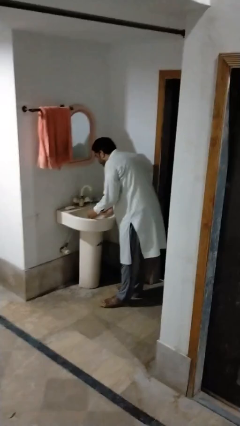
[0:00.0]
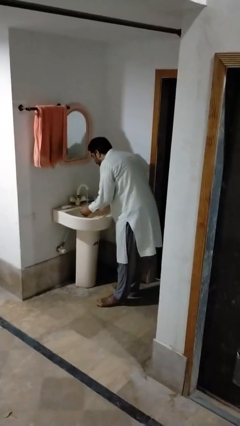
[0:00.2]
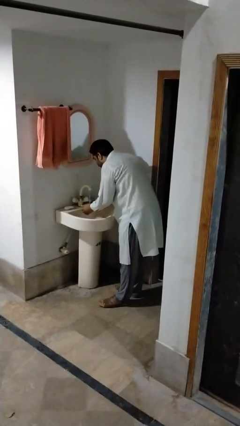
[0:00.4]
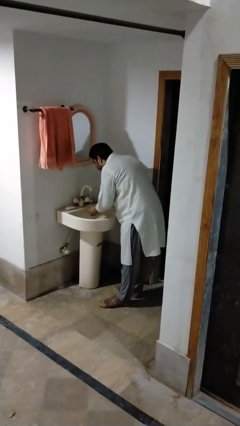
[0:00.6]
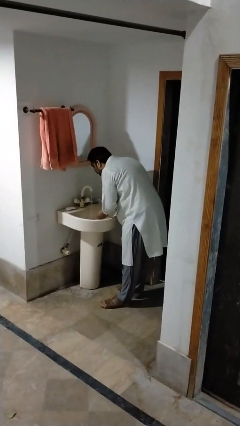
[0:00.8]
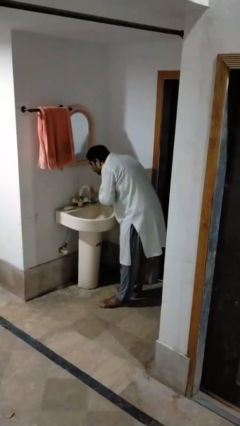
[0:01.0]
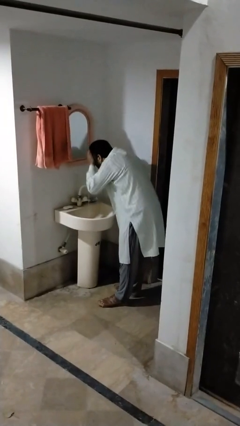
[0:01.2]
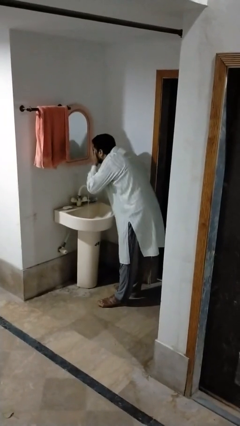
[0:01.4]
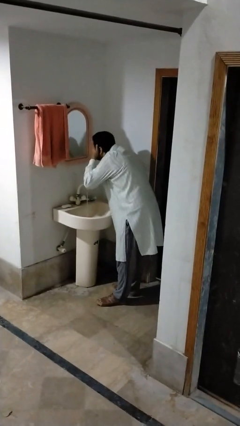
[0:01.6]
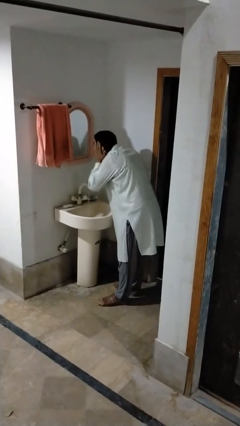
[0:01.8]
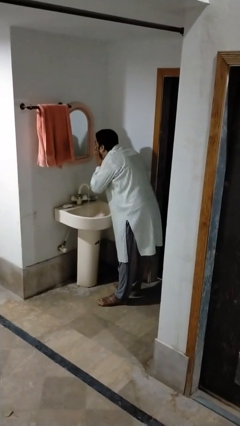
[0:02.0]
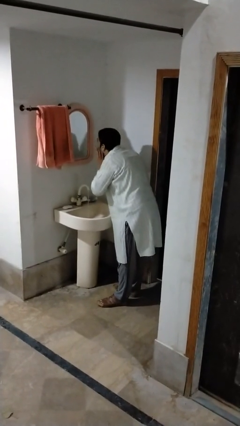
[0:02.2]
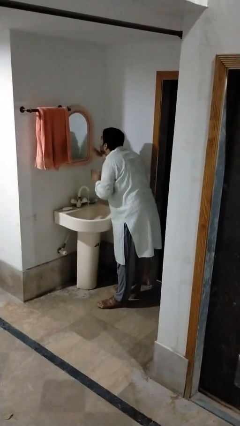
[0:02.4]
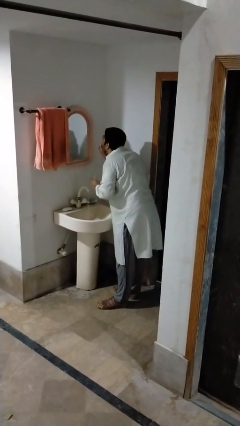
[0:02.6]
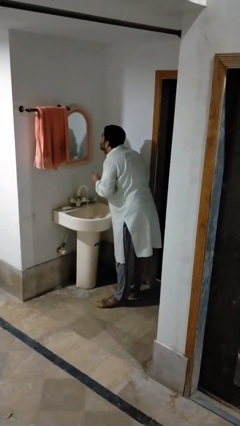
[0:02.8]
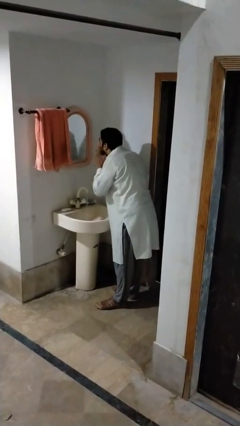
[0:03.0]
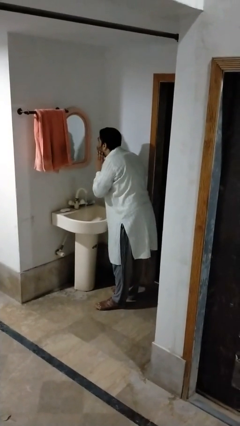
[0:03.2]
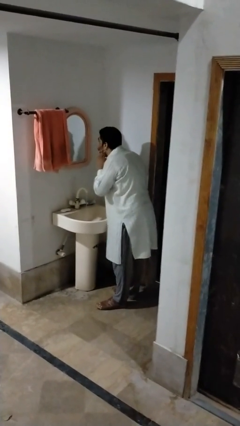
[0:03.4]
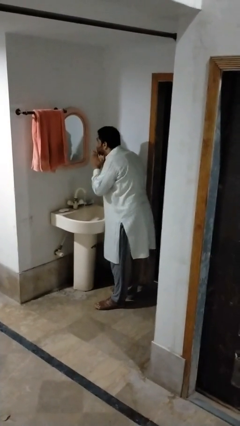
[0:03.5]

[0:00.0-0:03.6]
person washes face

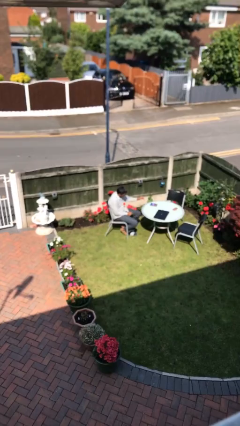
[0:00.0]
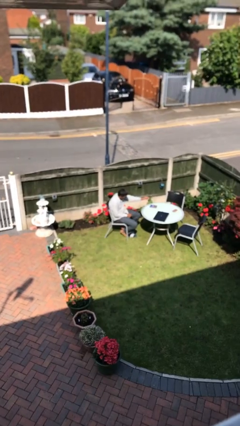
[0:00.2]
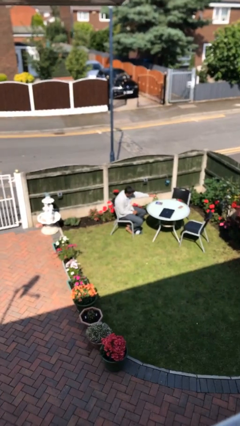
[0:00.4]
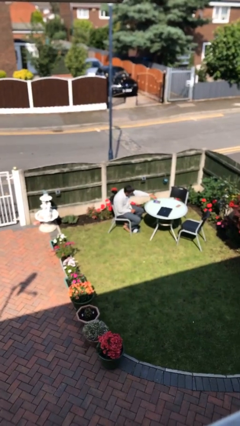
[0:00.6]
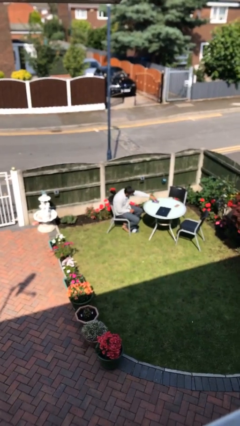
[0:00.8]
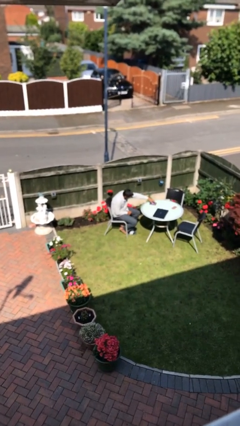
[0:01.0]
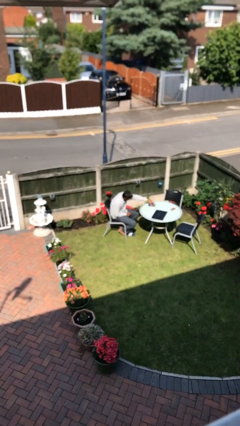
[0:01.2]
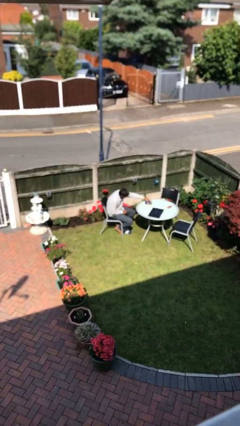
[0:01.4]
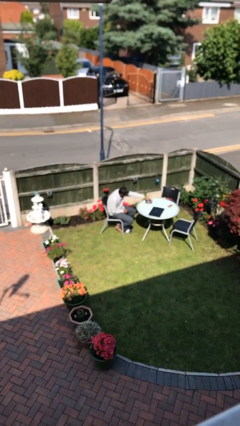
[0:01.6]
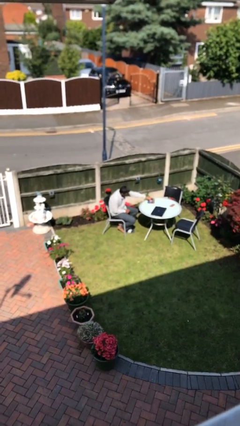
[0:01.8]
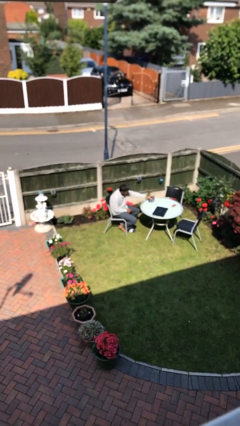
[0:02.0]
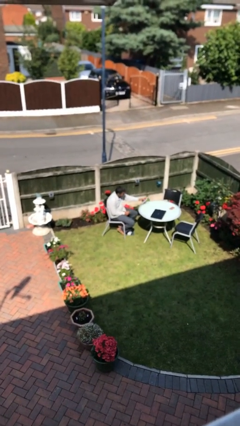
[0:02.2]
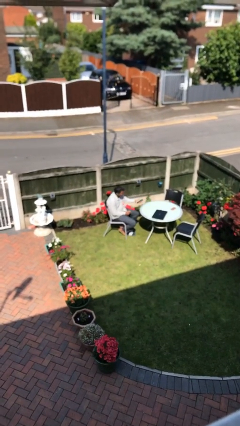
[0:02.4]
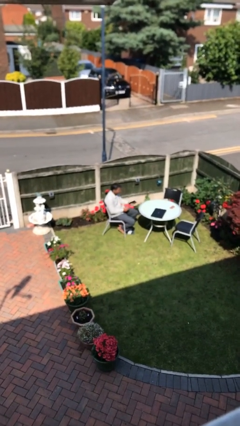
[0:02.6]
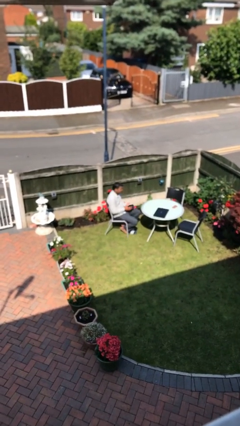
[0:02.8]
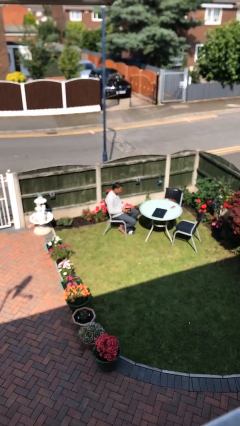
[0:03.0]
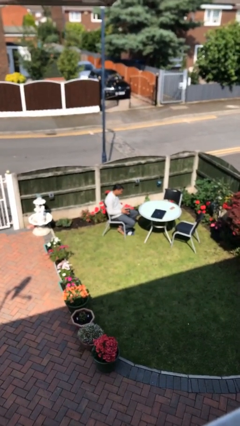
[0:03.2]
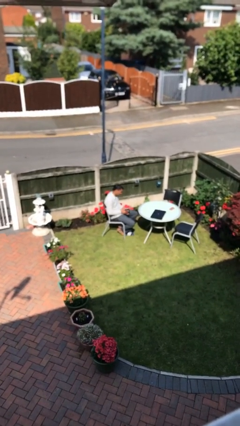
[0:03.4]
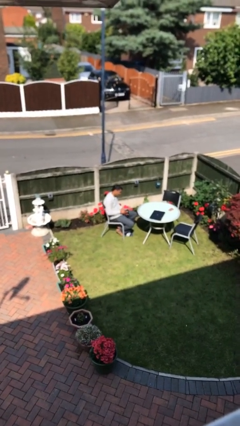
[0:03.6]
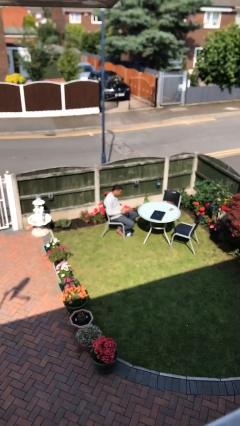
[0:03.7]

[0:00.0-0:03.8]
person picks up object from table

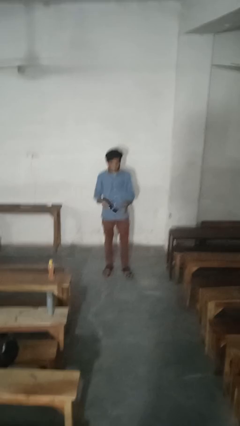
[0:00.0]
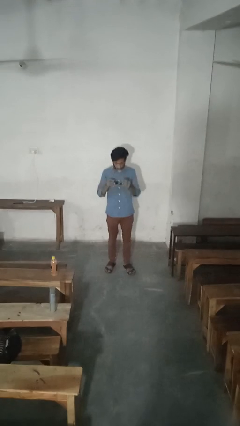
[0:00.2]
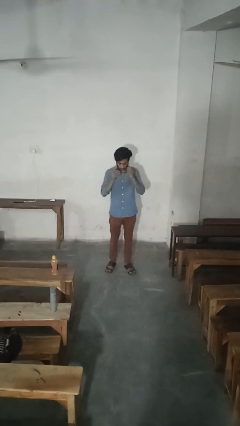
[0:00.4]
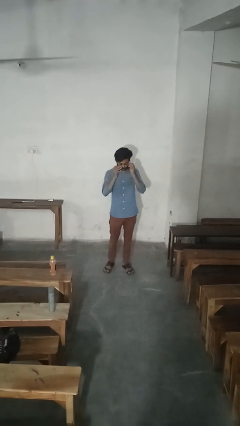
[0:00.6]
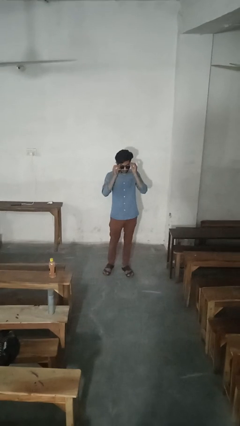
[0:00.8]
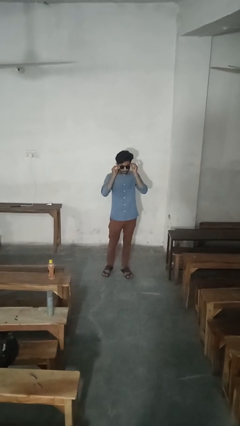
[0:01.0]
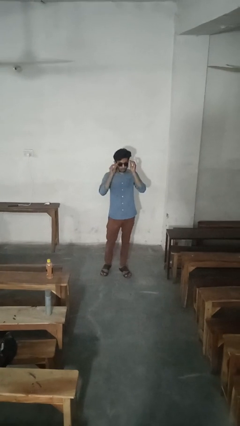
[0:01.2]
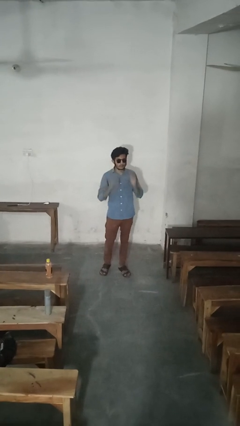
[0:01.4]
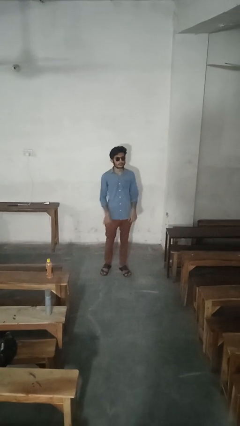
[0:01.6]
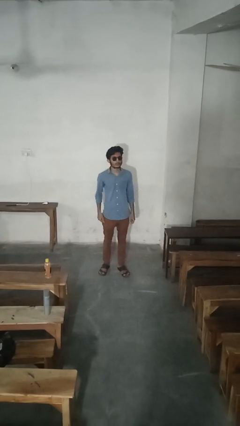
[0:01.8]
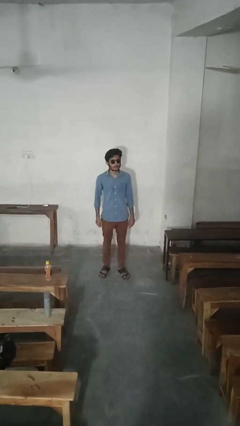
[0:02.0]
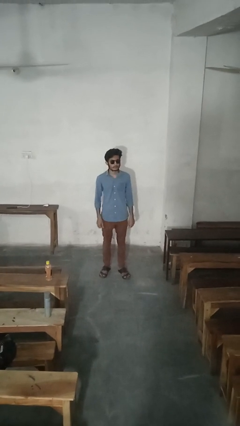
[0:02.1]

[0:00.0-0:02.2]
person puts on sunglasses

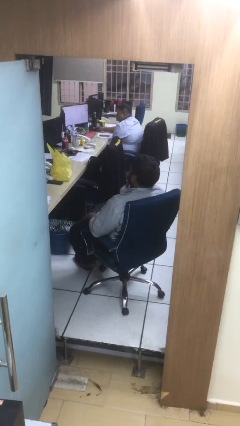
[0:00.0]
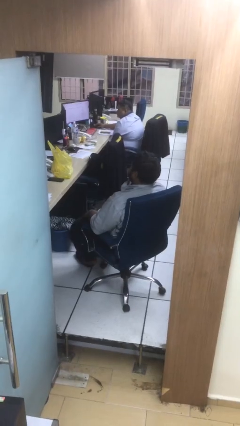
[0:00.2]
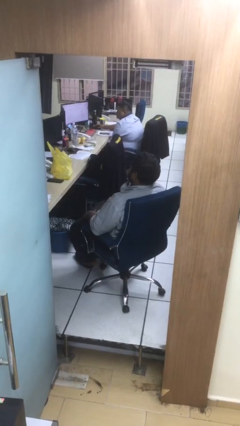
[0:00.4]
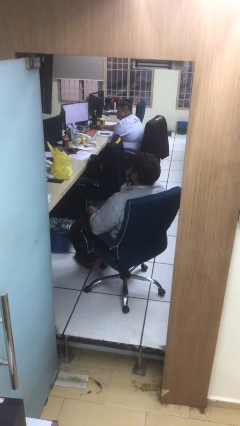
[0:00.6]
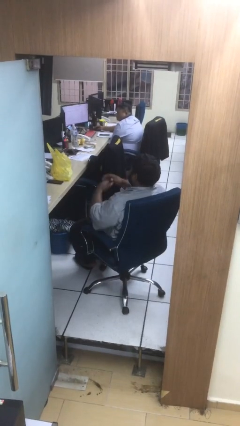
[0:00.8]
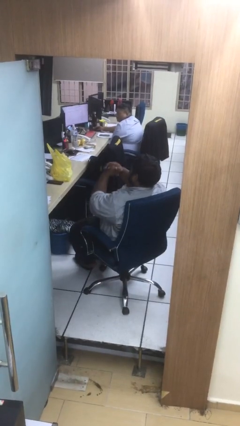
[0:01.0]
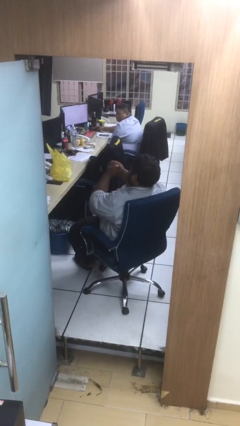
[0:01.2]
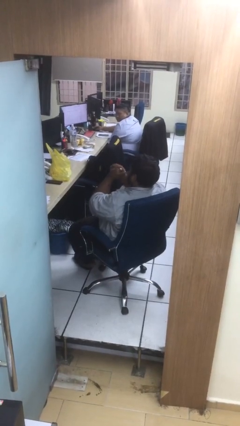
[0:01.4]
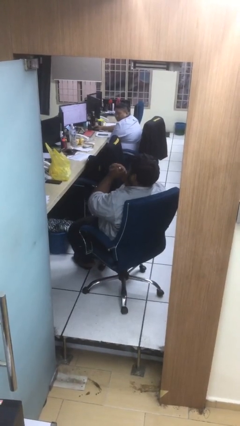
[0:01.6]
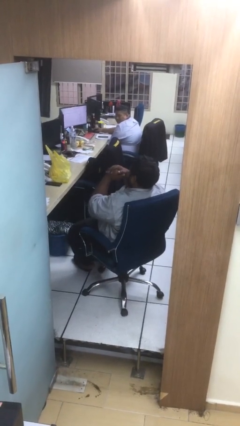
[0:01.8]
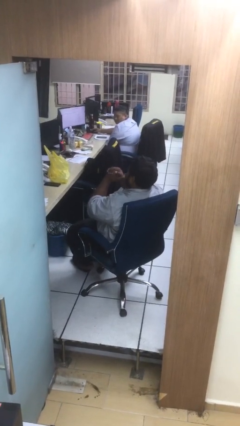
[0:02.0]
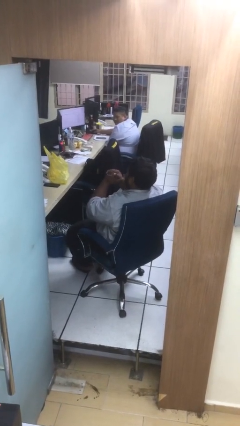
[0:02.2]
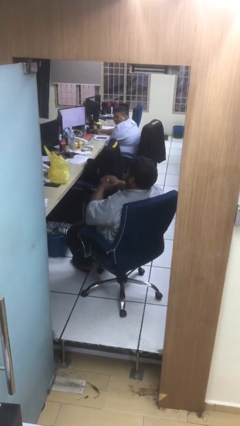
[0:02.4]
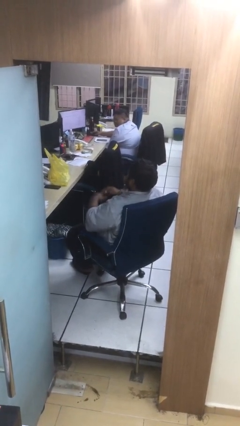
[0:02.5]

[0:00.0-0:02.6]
person cracks knuckles

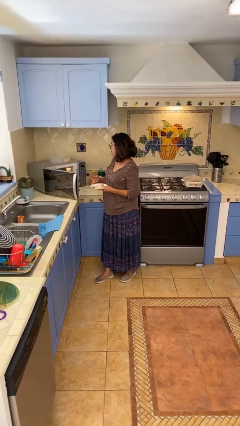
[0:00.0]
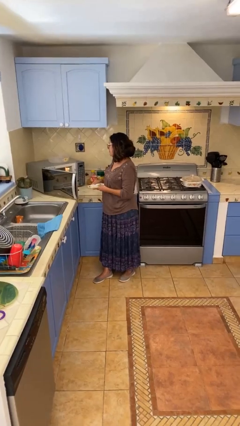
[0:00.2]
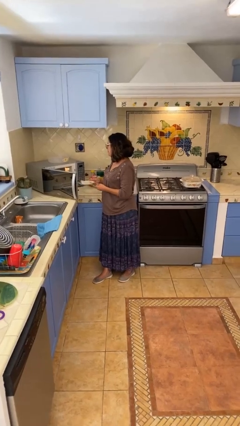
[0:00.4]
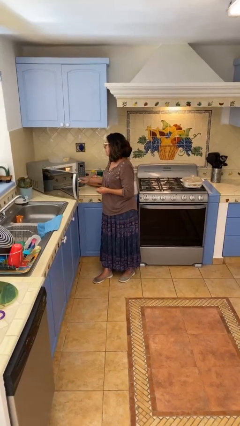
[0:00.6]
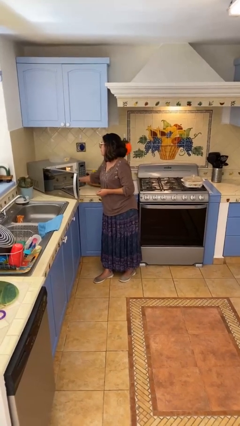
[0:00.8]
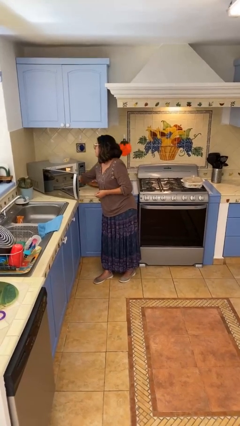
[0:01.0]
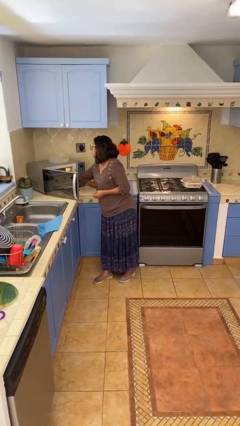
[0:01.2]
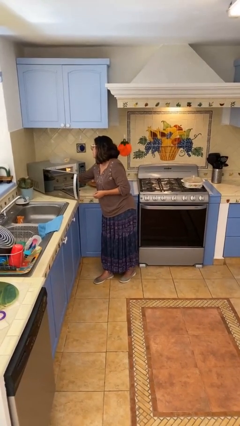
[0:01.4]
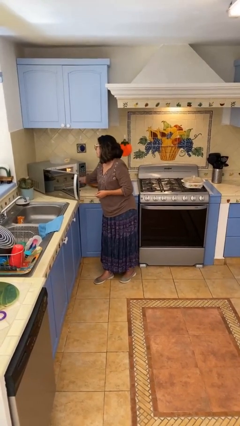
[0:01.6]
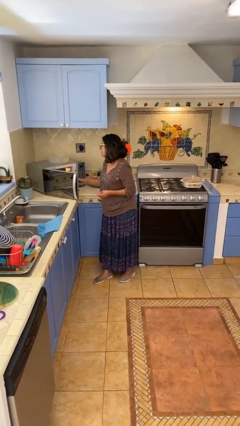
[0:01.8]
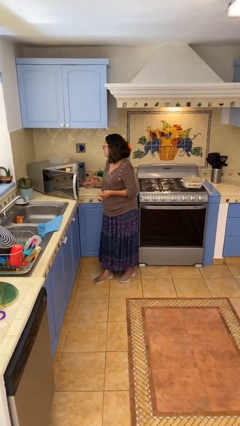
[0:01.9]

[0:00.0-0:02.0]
person puts object into microwave

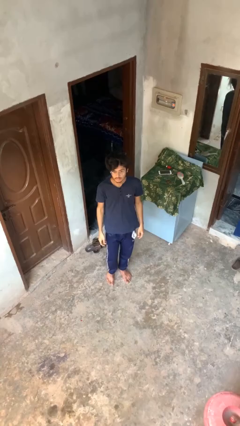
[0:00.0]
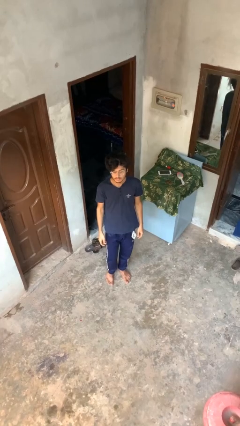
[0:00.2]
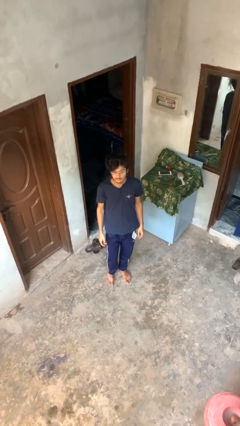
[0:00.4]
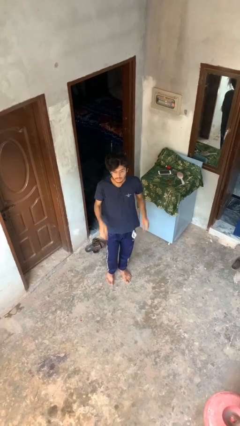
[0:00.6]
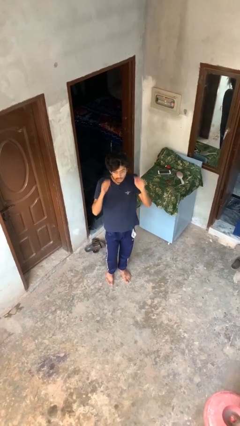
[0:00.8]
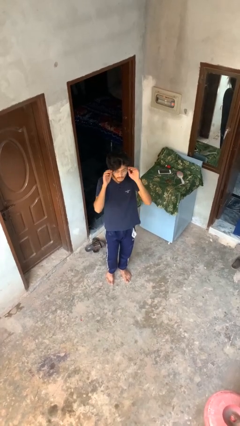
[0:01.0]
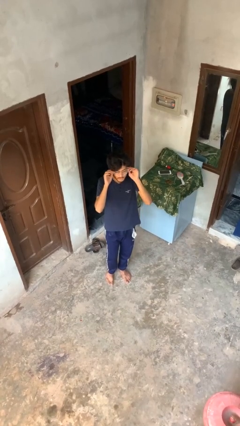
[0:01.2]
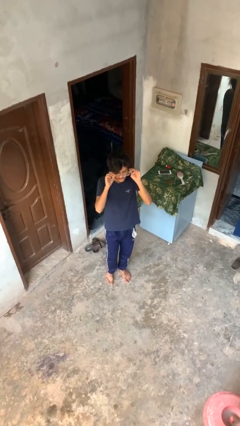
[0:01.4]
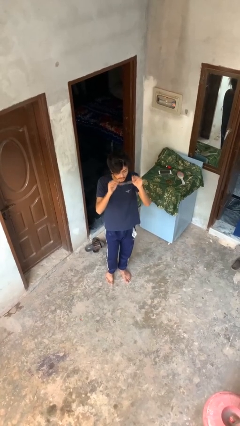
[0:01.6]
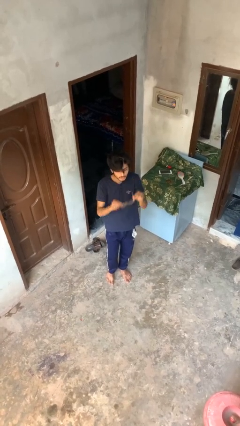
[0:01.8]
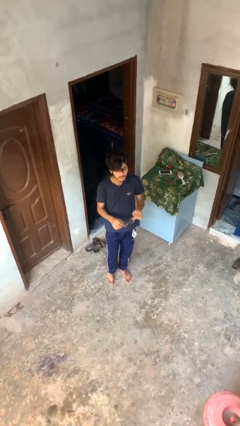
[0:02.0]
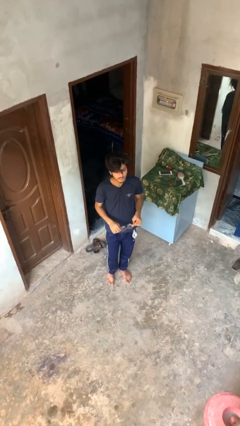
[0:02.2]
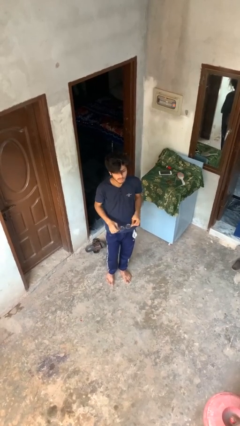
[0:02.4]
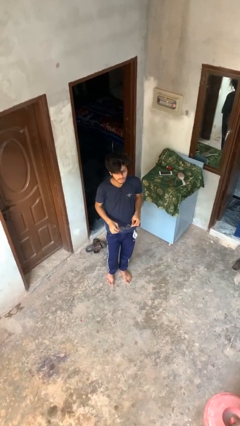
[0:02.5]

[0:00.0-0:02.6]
person takes off glasses

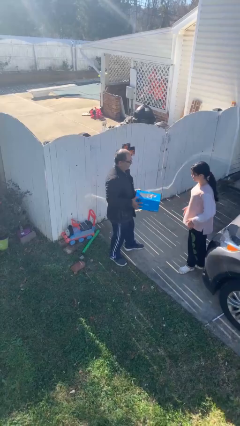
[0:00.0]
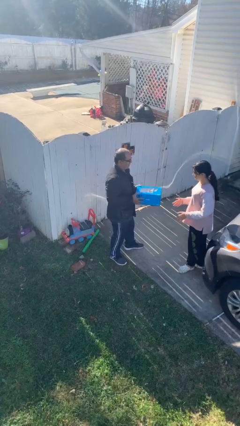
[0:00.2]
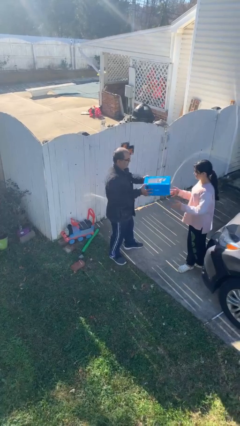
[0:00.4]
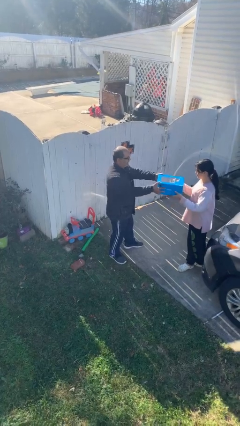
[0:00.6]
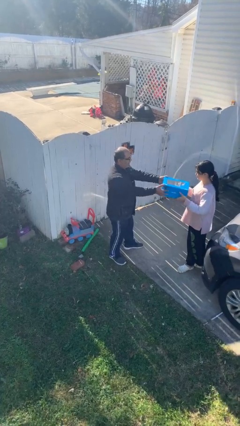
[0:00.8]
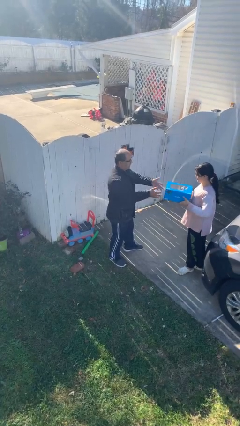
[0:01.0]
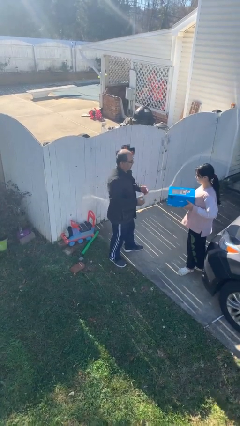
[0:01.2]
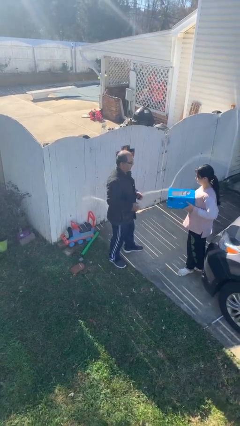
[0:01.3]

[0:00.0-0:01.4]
person transfers object to person
